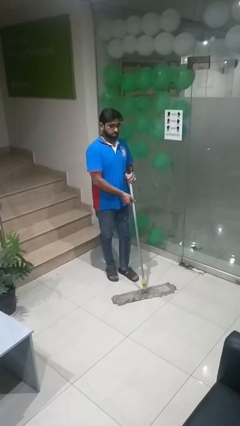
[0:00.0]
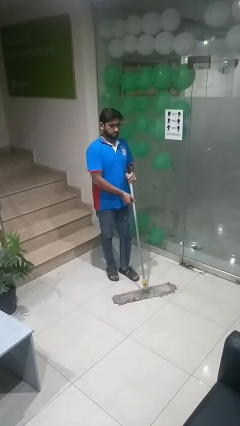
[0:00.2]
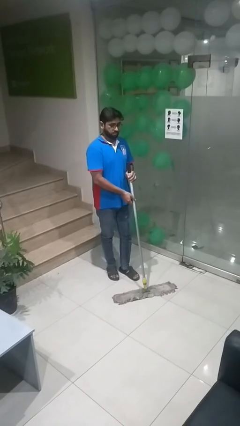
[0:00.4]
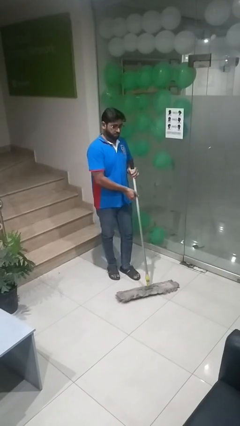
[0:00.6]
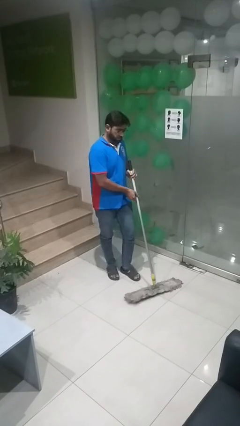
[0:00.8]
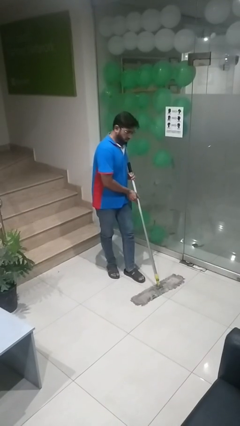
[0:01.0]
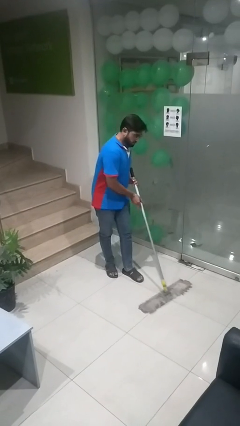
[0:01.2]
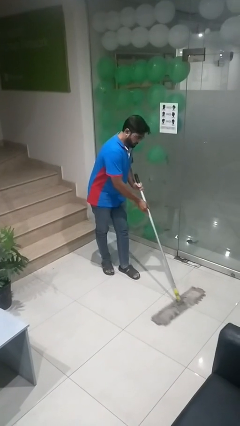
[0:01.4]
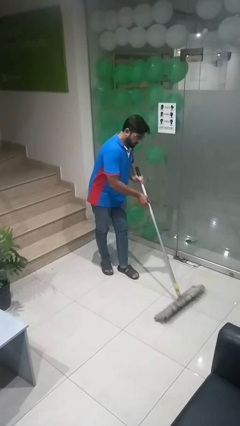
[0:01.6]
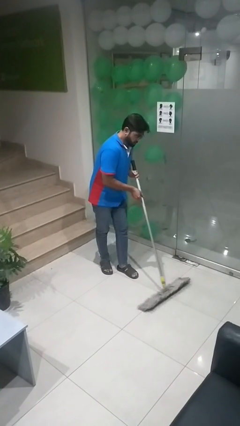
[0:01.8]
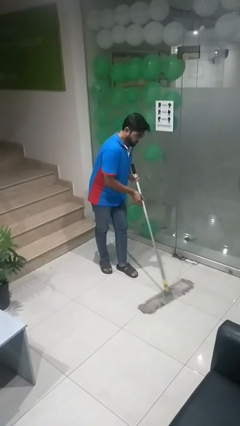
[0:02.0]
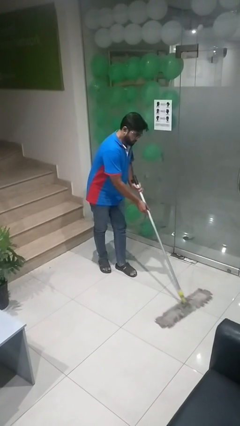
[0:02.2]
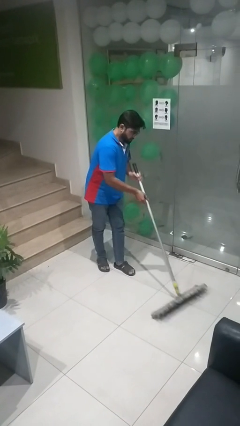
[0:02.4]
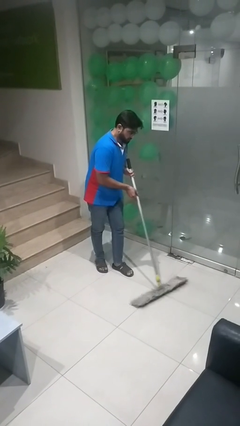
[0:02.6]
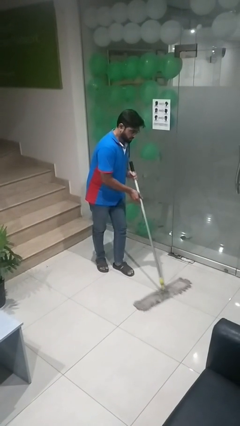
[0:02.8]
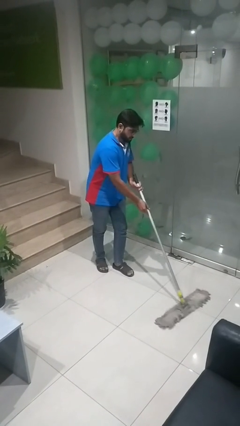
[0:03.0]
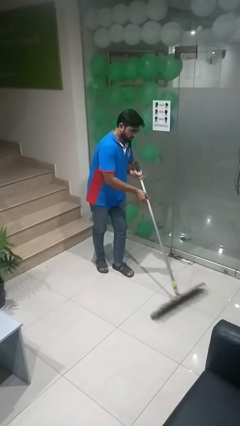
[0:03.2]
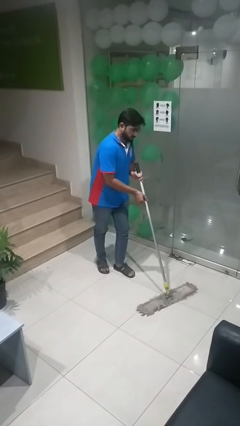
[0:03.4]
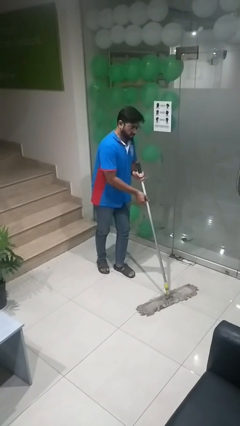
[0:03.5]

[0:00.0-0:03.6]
person mops

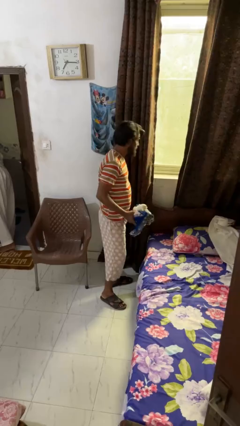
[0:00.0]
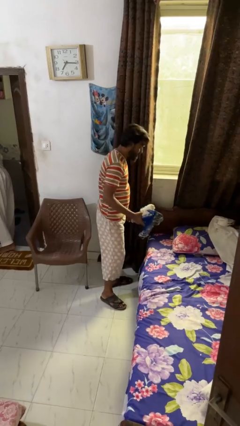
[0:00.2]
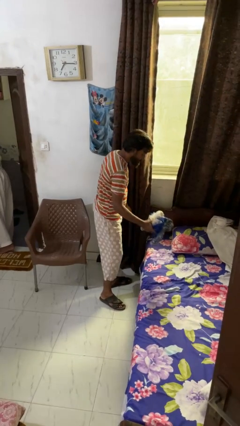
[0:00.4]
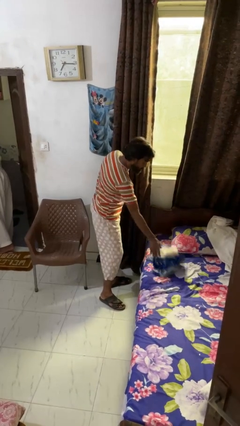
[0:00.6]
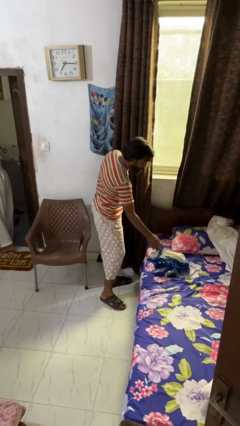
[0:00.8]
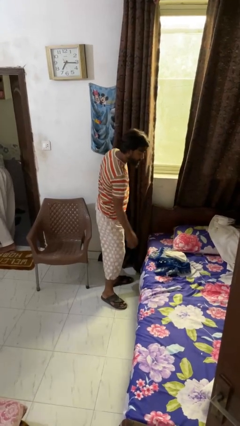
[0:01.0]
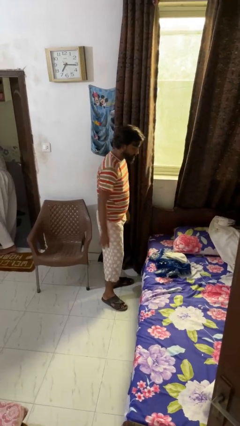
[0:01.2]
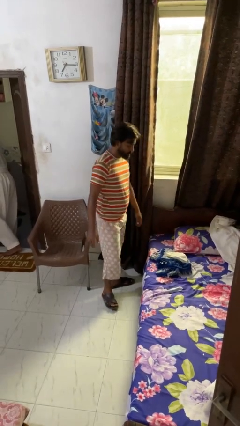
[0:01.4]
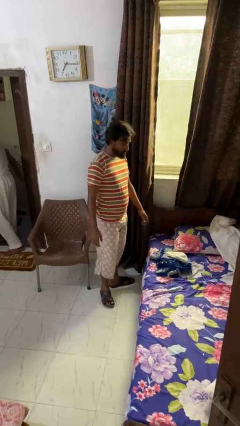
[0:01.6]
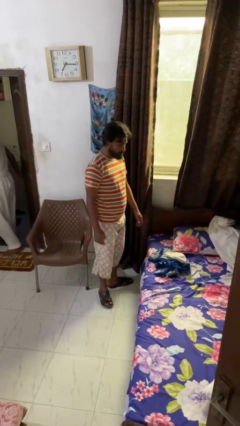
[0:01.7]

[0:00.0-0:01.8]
person puts down object on bed

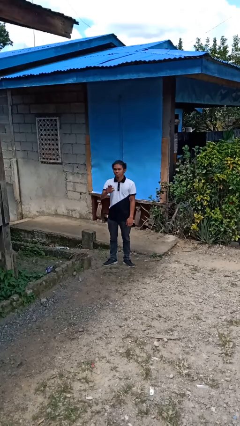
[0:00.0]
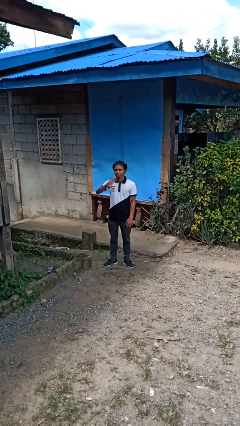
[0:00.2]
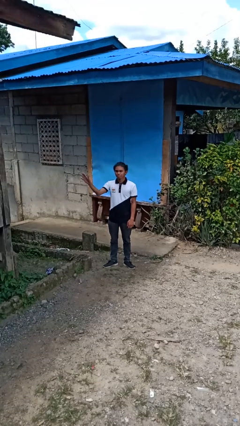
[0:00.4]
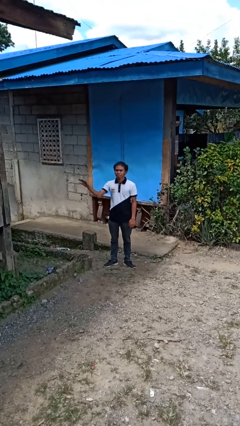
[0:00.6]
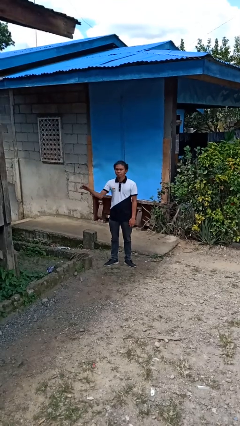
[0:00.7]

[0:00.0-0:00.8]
person gestures swipe right

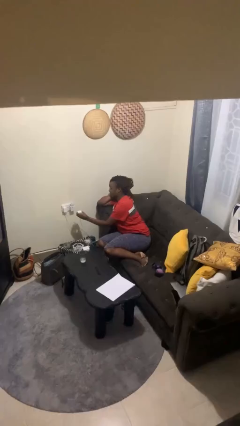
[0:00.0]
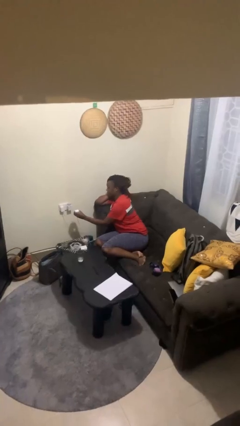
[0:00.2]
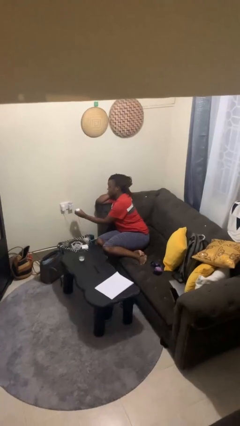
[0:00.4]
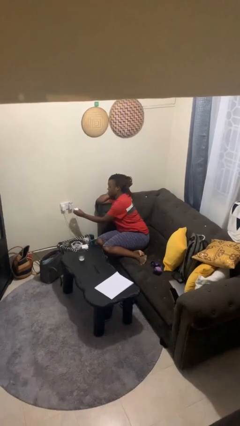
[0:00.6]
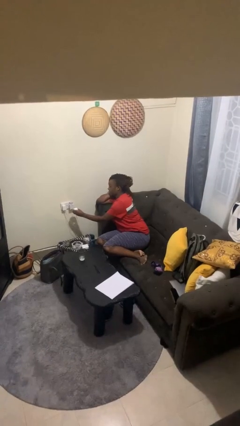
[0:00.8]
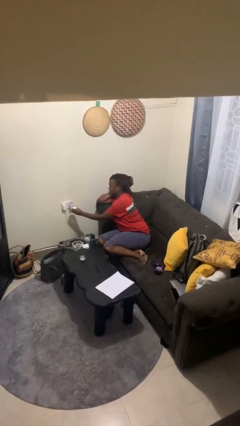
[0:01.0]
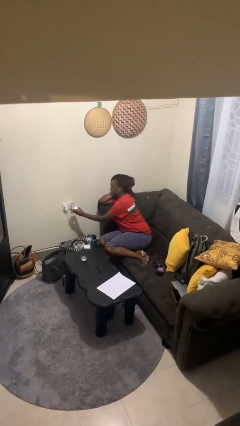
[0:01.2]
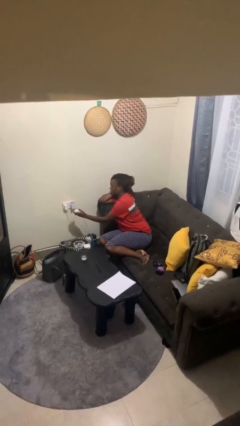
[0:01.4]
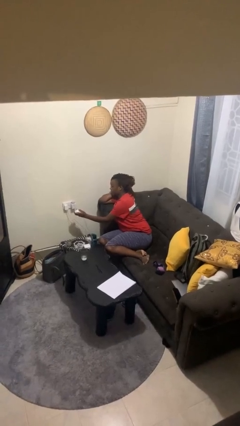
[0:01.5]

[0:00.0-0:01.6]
person unplugs from electrical socket

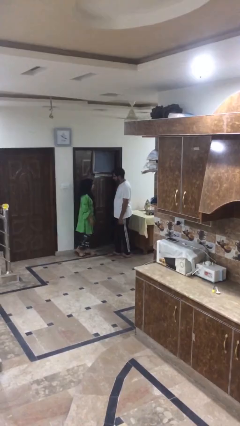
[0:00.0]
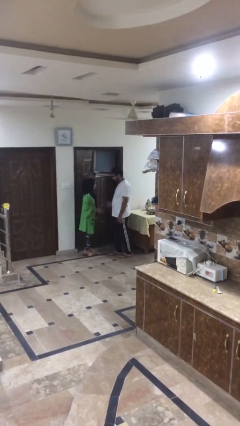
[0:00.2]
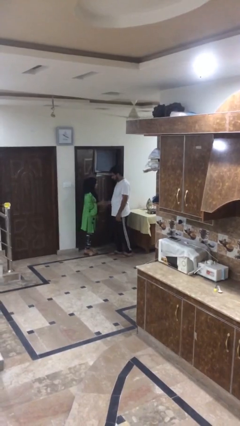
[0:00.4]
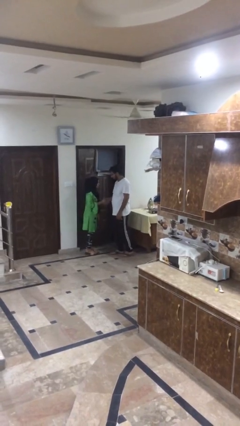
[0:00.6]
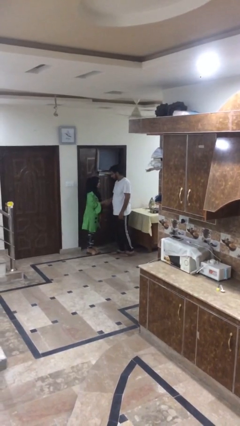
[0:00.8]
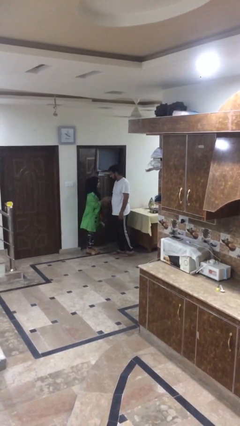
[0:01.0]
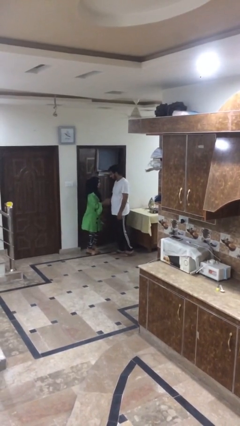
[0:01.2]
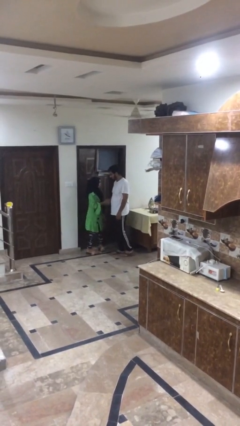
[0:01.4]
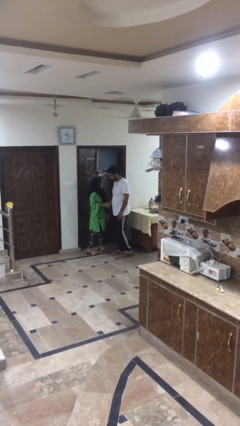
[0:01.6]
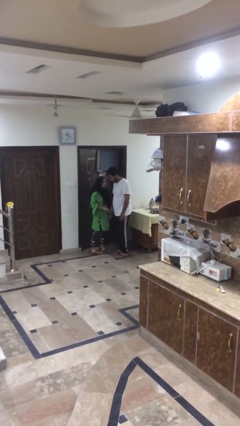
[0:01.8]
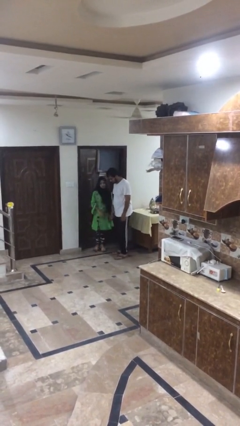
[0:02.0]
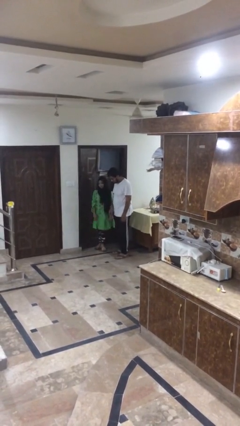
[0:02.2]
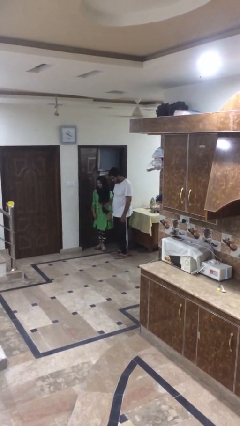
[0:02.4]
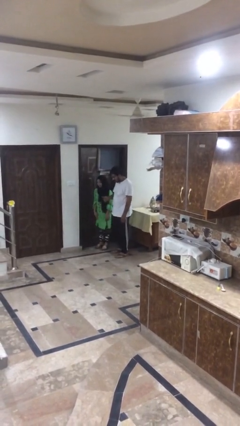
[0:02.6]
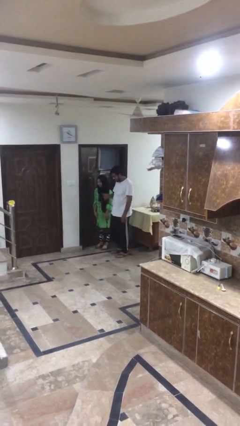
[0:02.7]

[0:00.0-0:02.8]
person shakes hand

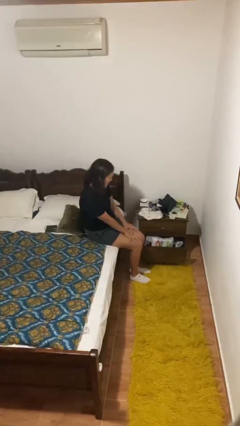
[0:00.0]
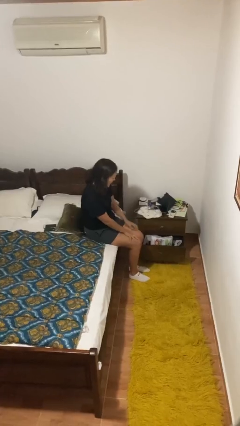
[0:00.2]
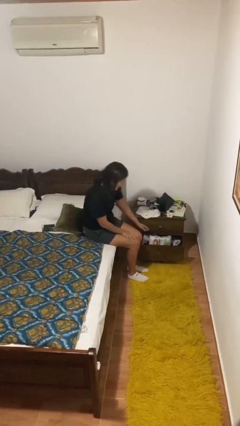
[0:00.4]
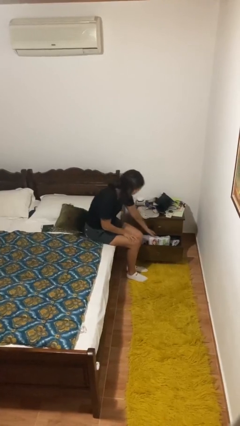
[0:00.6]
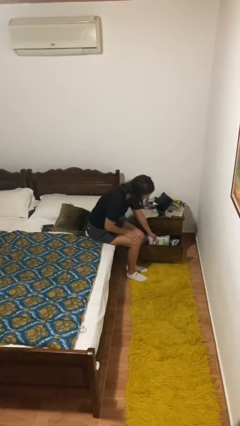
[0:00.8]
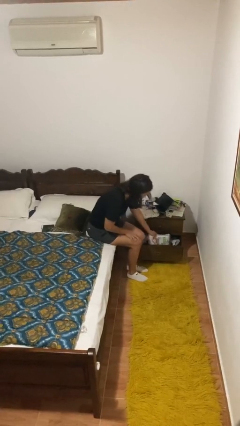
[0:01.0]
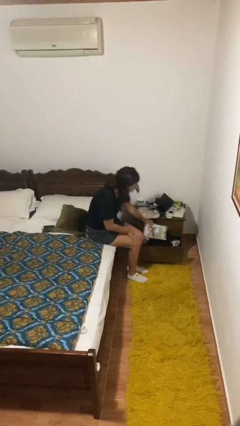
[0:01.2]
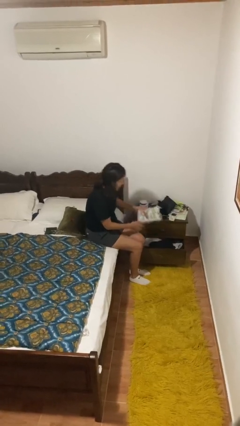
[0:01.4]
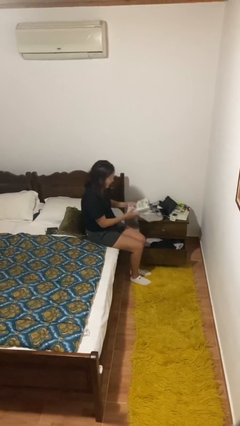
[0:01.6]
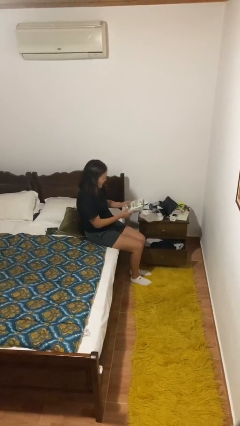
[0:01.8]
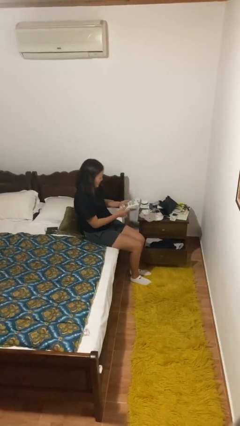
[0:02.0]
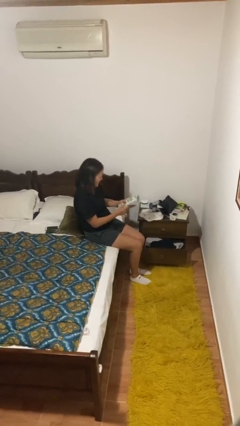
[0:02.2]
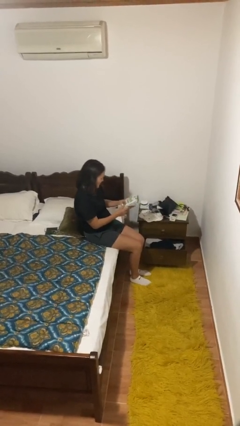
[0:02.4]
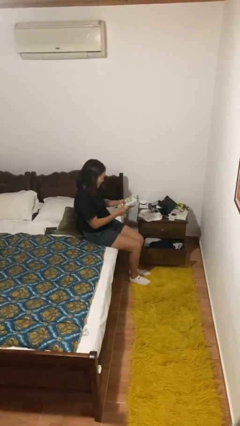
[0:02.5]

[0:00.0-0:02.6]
person picks up object from cabinet

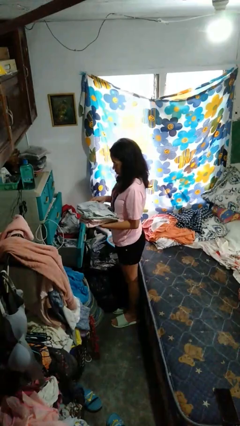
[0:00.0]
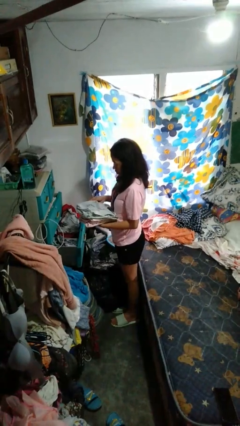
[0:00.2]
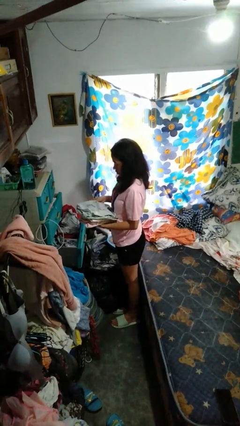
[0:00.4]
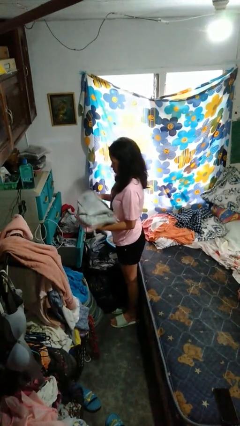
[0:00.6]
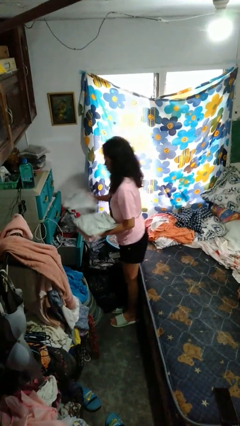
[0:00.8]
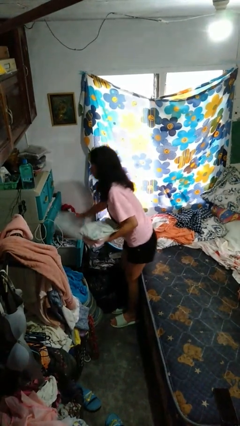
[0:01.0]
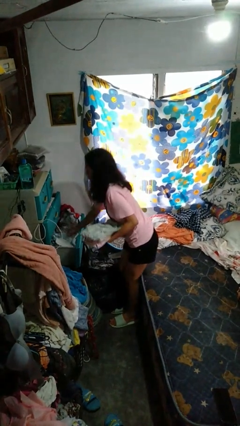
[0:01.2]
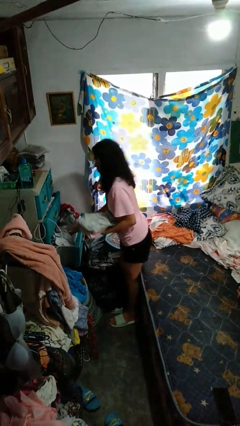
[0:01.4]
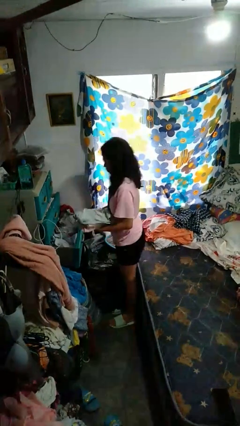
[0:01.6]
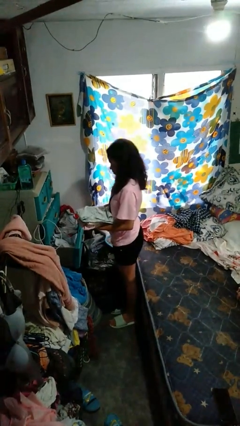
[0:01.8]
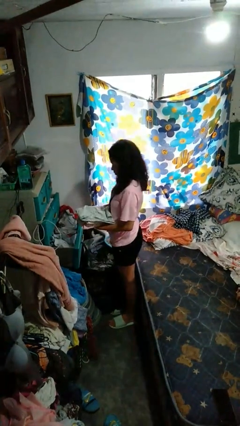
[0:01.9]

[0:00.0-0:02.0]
person puts clothes into dresser

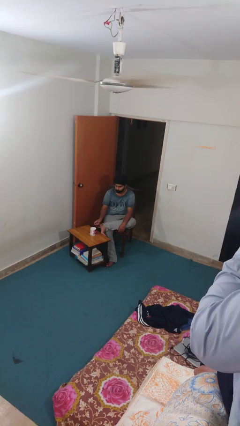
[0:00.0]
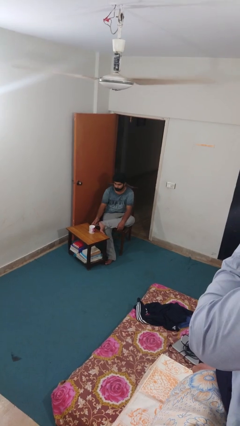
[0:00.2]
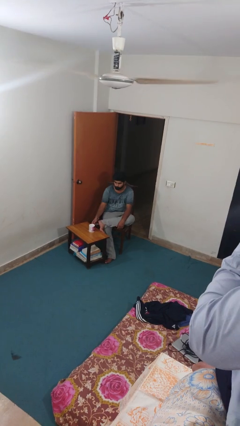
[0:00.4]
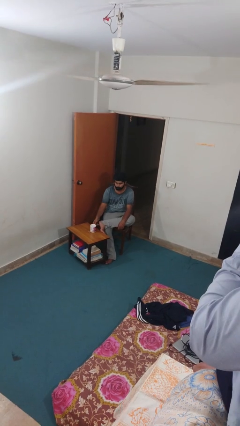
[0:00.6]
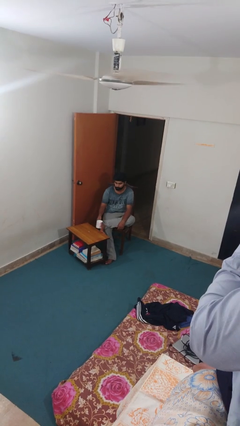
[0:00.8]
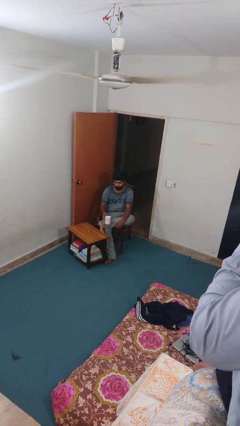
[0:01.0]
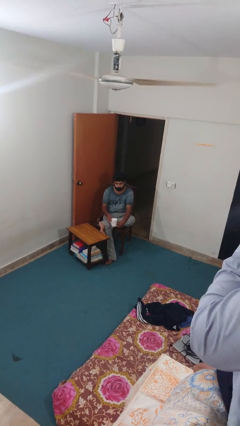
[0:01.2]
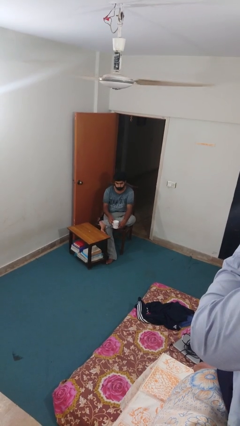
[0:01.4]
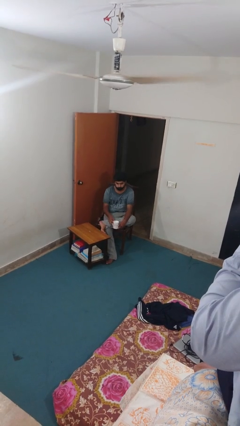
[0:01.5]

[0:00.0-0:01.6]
person picks up object from table
